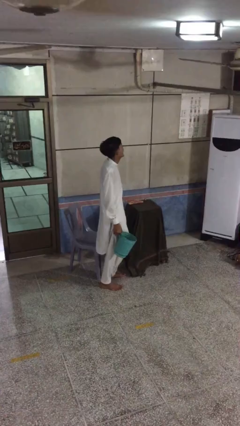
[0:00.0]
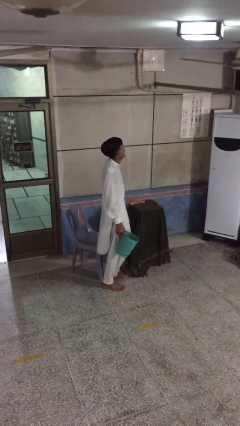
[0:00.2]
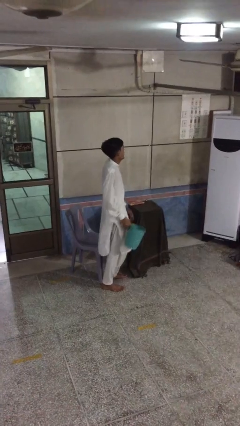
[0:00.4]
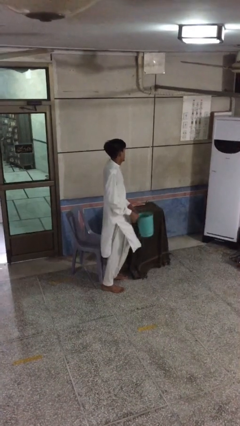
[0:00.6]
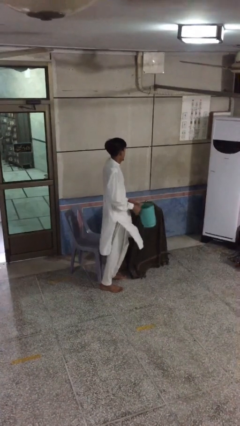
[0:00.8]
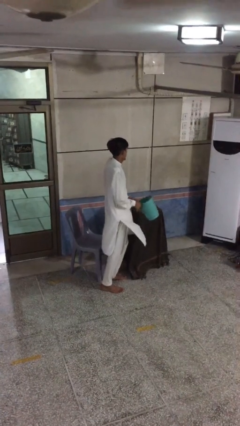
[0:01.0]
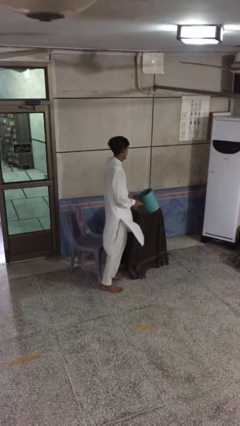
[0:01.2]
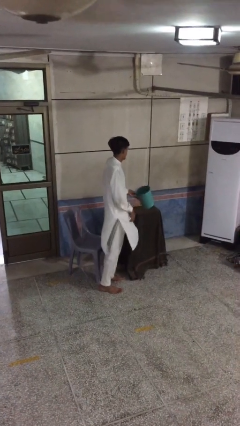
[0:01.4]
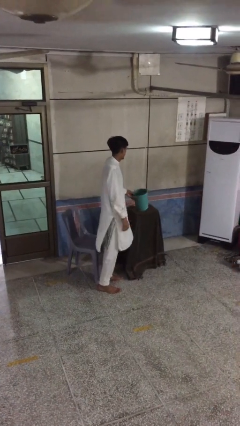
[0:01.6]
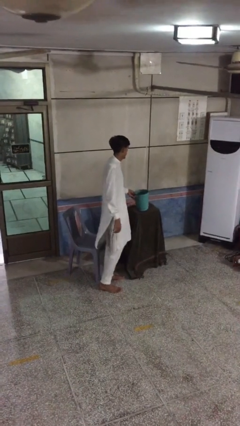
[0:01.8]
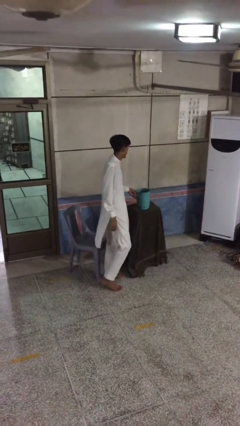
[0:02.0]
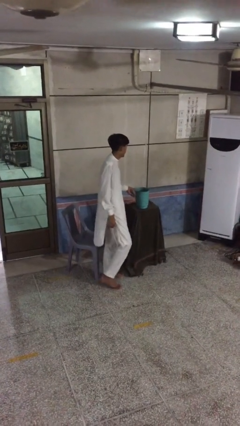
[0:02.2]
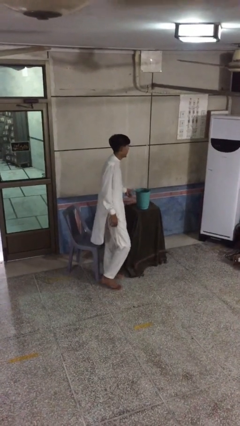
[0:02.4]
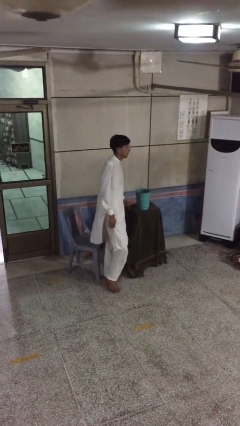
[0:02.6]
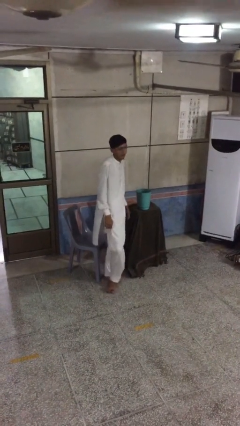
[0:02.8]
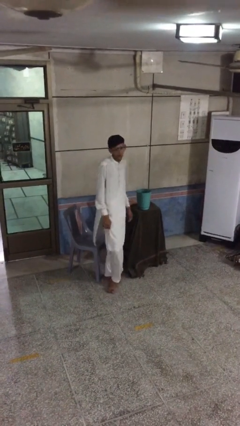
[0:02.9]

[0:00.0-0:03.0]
person puts down object on table

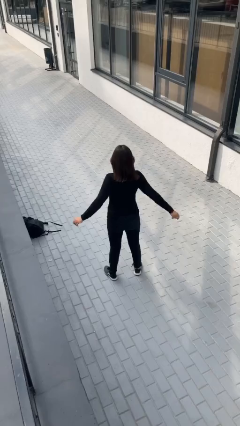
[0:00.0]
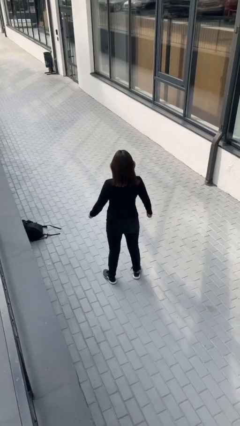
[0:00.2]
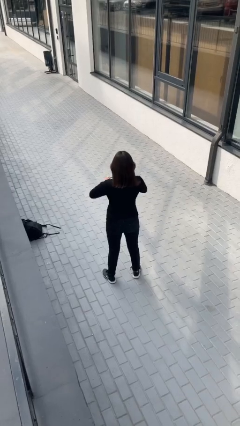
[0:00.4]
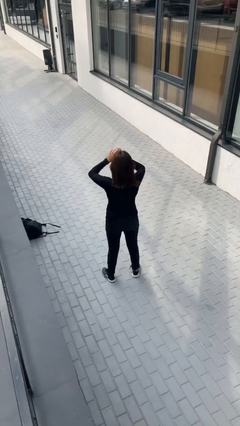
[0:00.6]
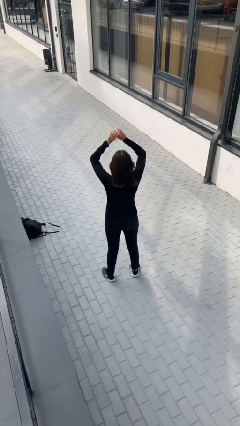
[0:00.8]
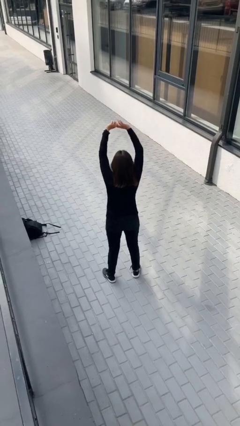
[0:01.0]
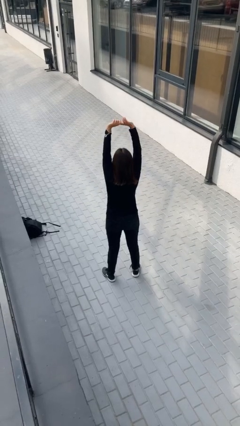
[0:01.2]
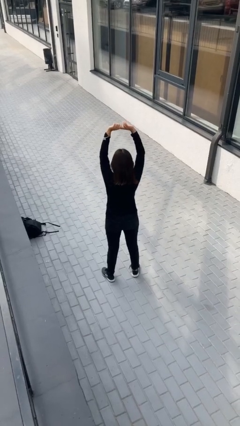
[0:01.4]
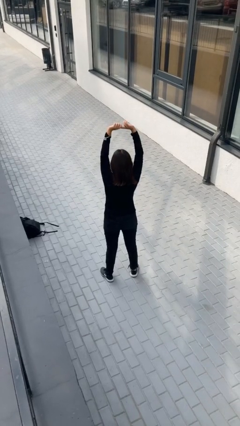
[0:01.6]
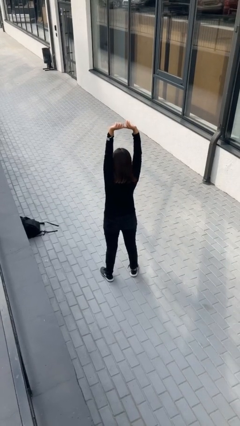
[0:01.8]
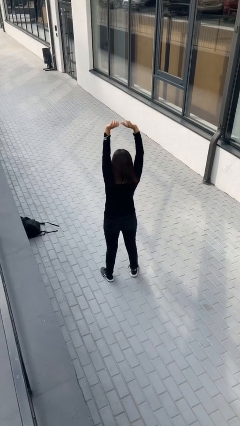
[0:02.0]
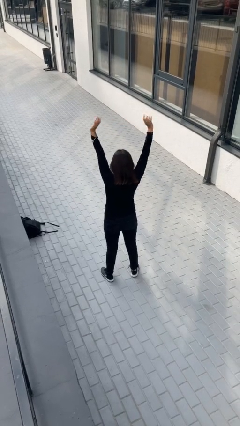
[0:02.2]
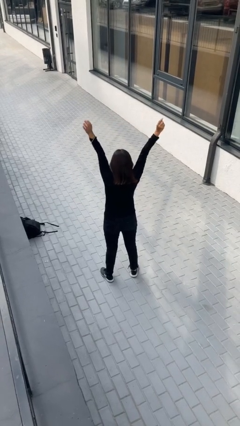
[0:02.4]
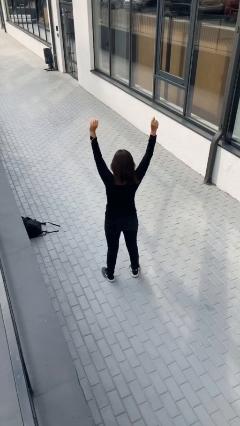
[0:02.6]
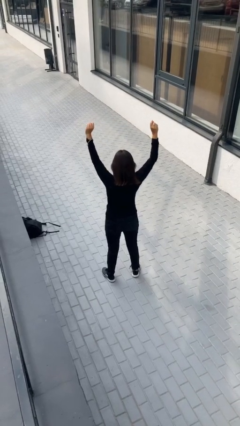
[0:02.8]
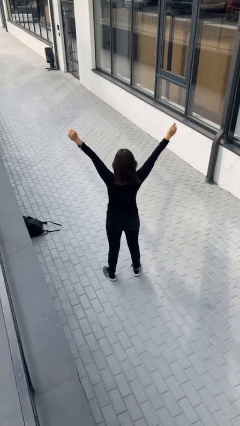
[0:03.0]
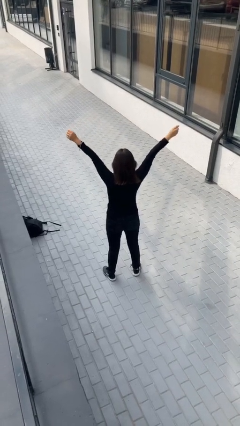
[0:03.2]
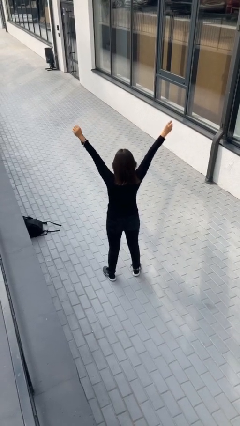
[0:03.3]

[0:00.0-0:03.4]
person stretches arms over head

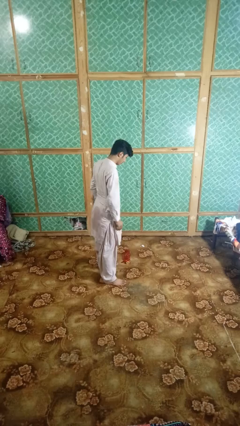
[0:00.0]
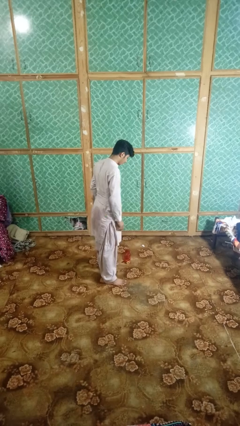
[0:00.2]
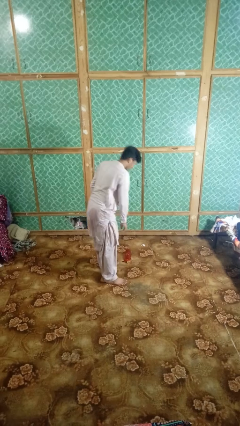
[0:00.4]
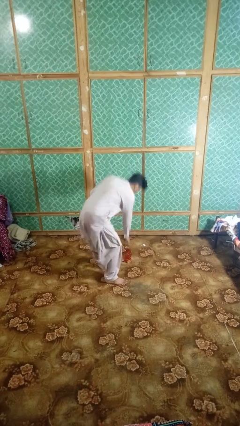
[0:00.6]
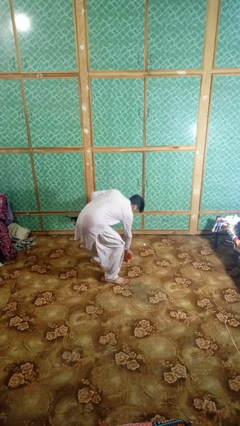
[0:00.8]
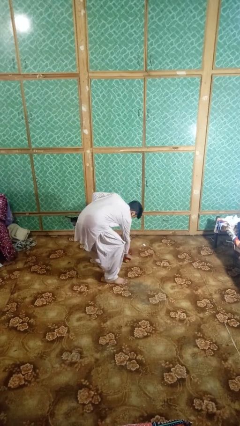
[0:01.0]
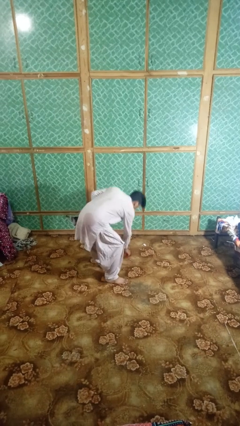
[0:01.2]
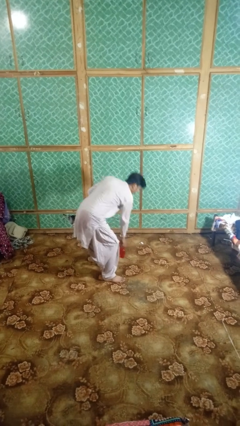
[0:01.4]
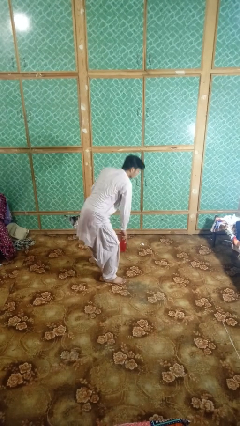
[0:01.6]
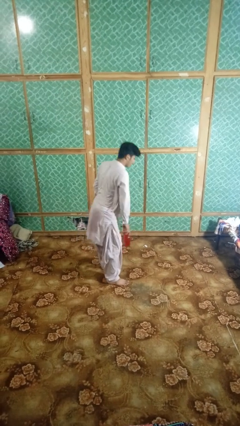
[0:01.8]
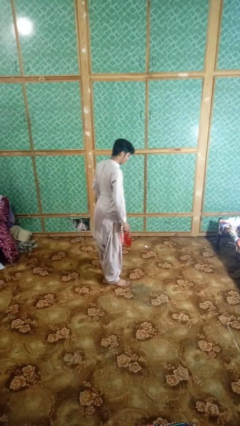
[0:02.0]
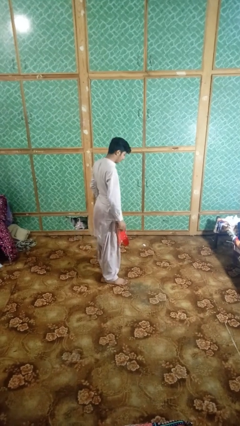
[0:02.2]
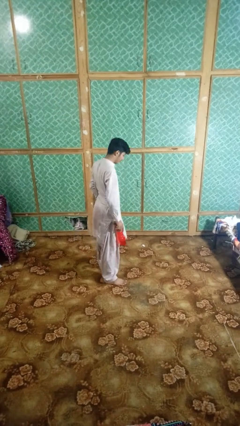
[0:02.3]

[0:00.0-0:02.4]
person picks up object from floor

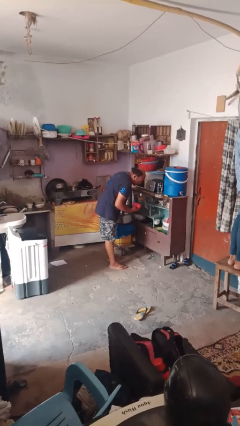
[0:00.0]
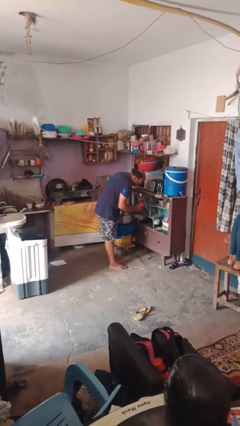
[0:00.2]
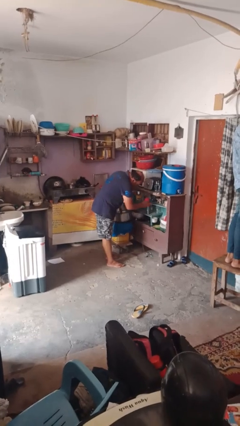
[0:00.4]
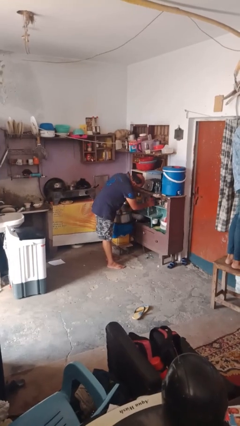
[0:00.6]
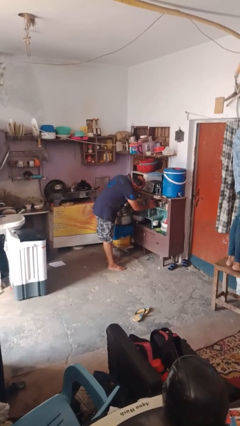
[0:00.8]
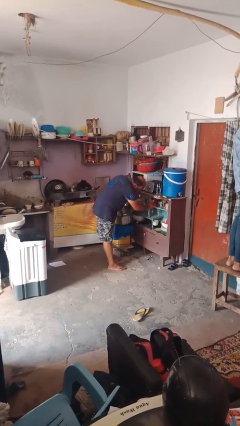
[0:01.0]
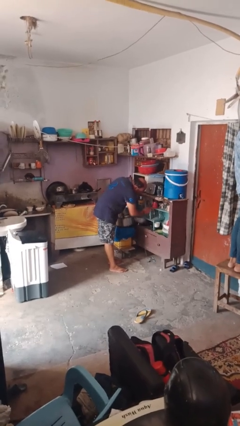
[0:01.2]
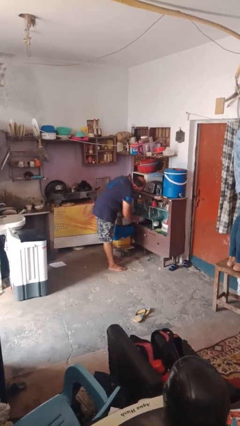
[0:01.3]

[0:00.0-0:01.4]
person puts object into kitchen drawer

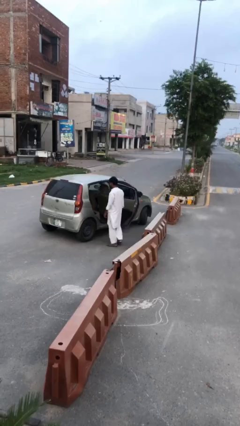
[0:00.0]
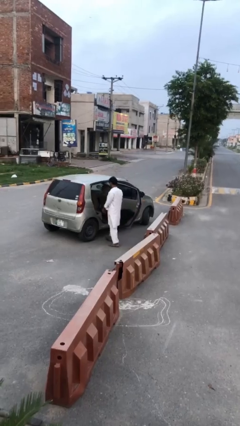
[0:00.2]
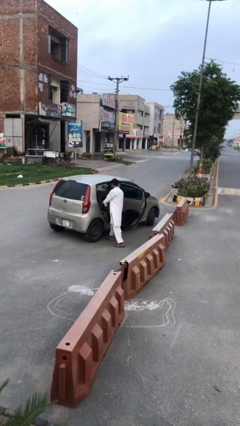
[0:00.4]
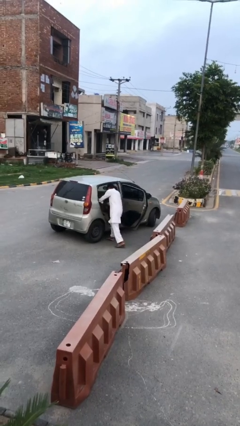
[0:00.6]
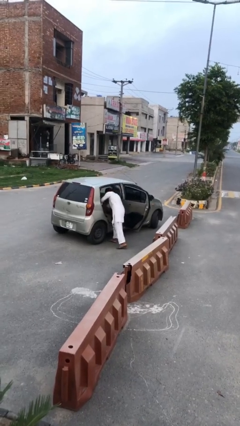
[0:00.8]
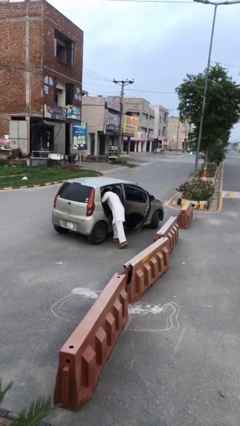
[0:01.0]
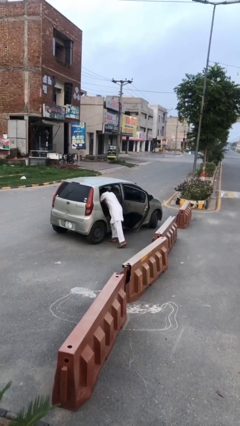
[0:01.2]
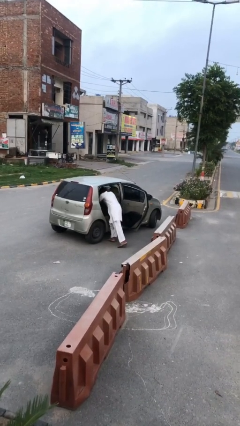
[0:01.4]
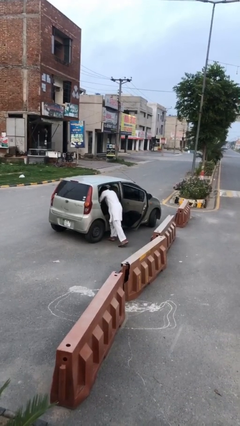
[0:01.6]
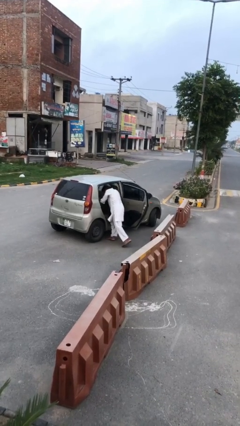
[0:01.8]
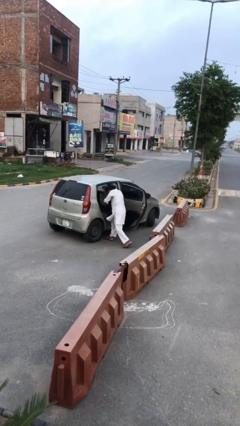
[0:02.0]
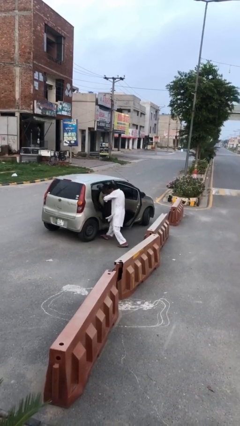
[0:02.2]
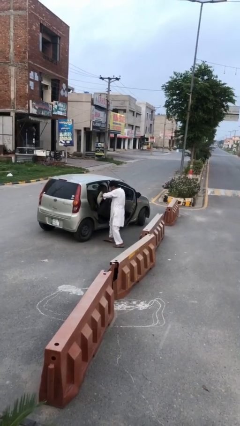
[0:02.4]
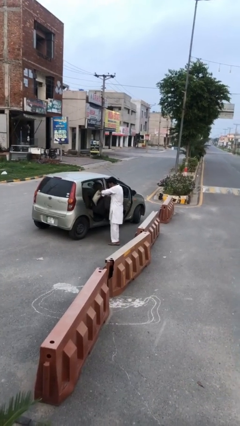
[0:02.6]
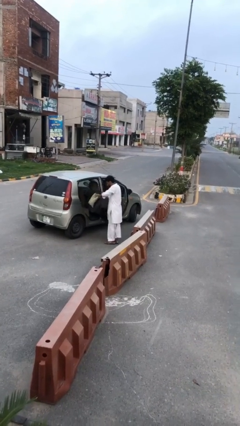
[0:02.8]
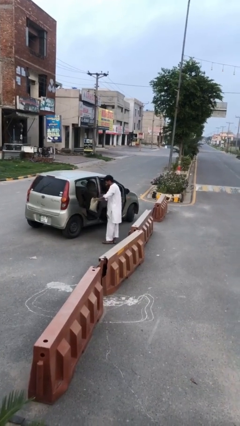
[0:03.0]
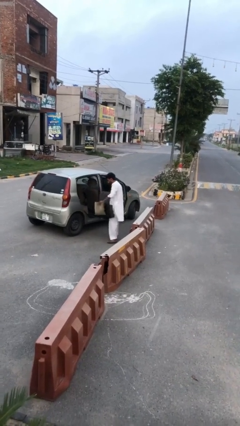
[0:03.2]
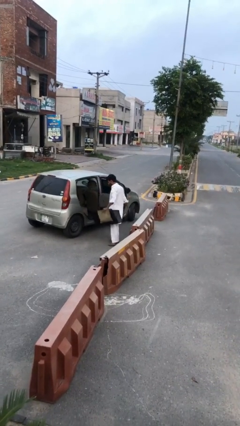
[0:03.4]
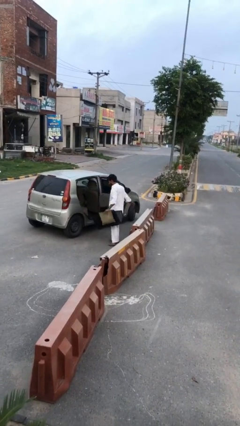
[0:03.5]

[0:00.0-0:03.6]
person unloads car

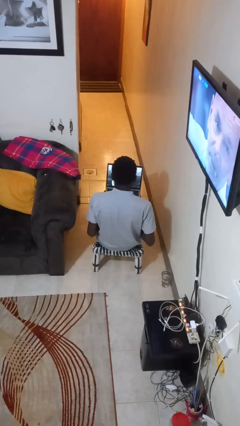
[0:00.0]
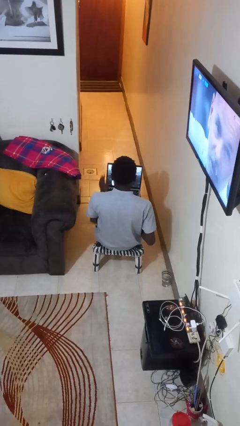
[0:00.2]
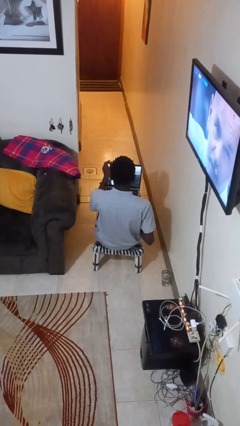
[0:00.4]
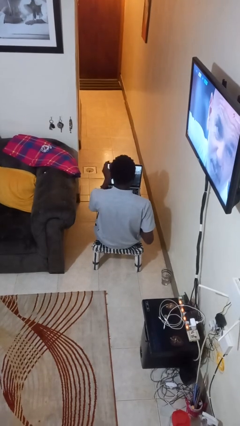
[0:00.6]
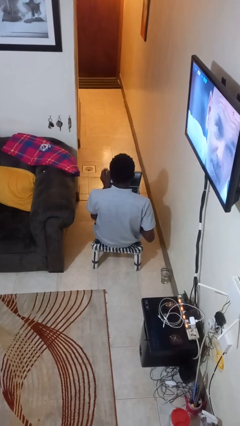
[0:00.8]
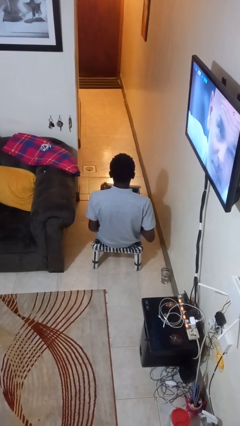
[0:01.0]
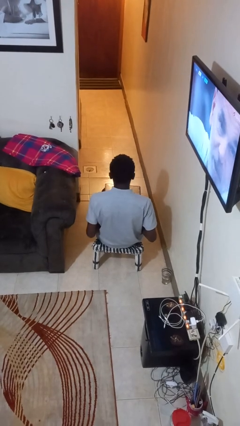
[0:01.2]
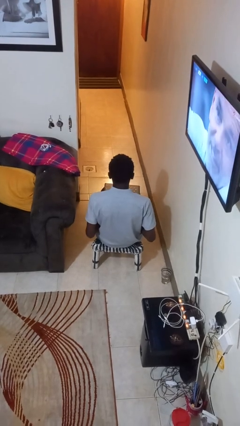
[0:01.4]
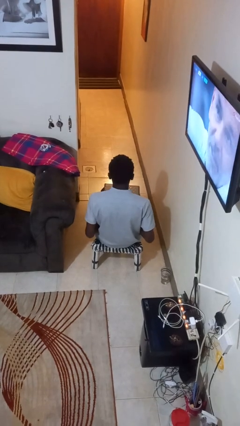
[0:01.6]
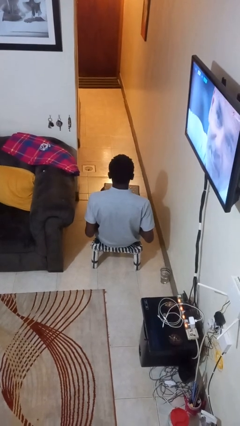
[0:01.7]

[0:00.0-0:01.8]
person closes laptop

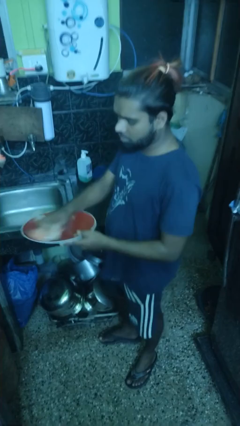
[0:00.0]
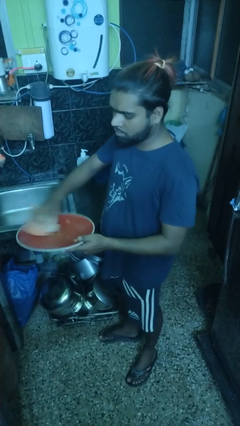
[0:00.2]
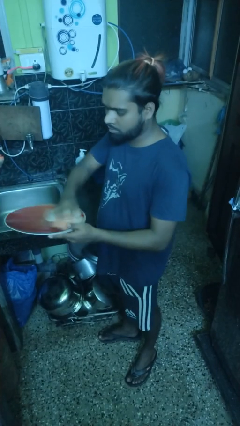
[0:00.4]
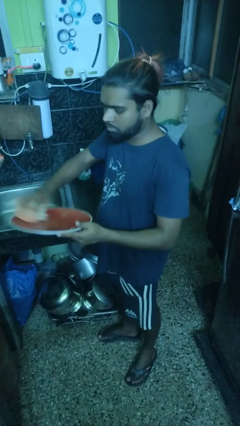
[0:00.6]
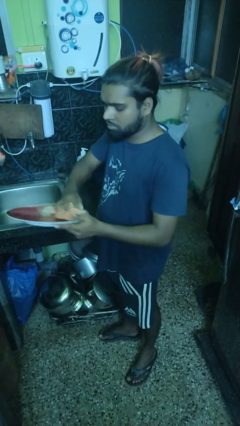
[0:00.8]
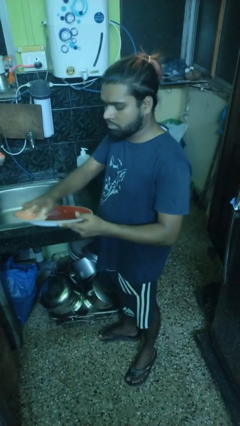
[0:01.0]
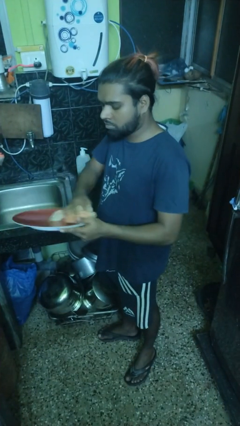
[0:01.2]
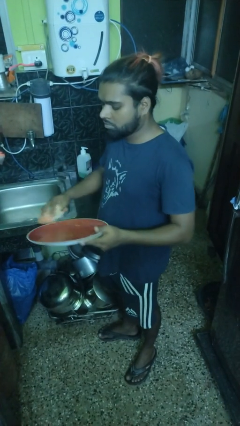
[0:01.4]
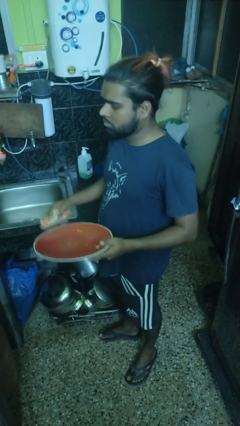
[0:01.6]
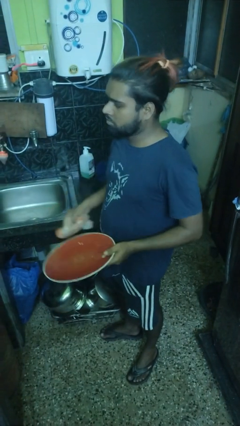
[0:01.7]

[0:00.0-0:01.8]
person dries dish
